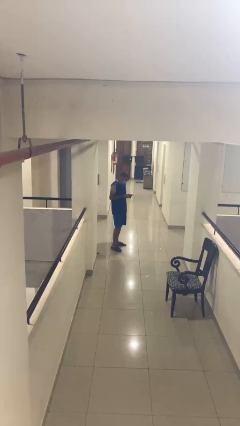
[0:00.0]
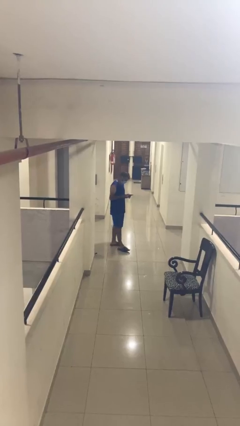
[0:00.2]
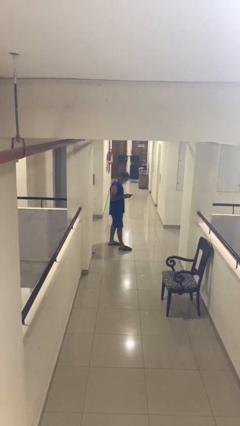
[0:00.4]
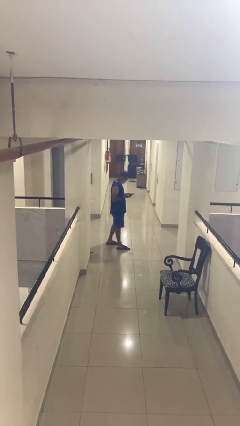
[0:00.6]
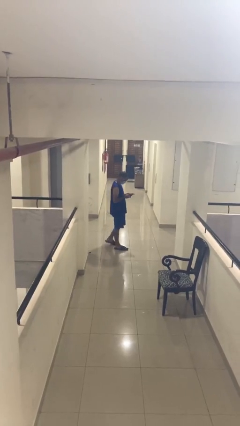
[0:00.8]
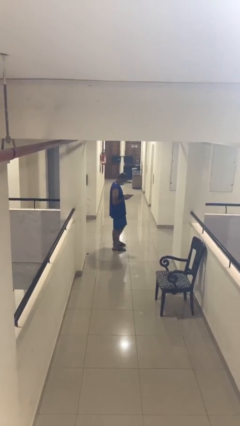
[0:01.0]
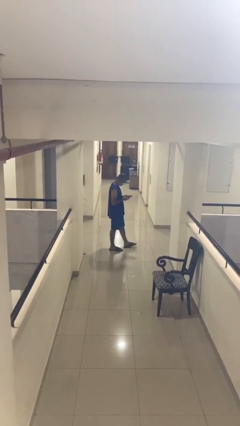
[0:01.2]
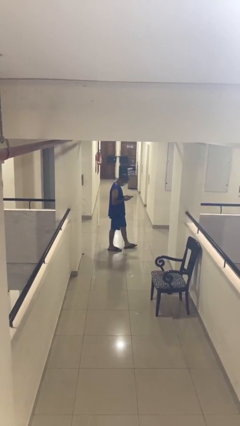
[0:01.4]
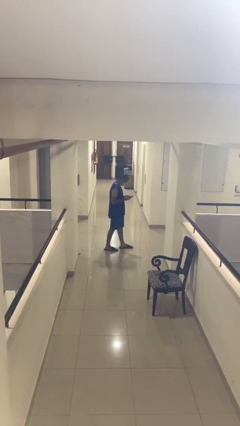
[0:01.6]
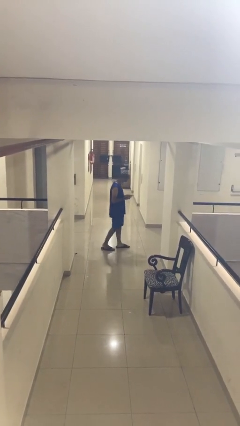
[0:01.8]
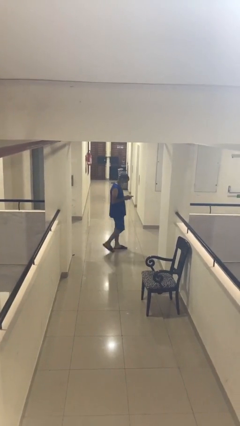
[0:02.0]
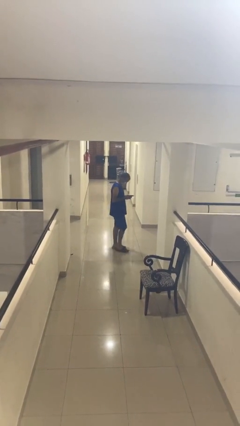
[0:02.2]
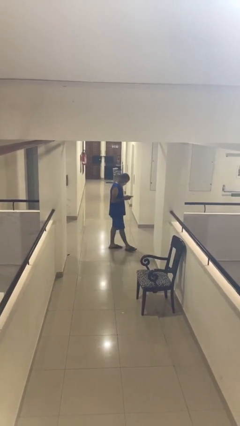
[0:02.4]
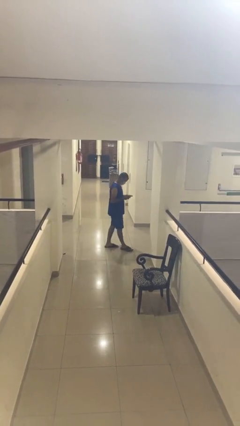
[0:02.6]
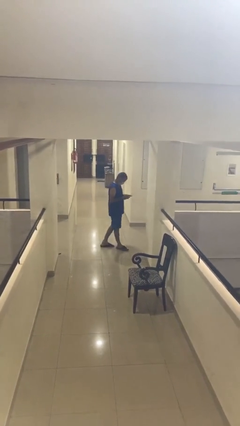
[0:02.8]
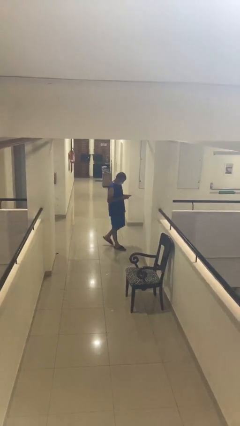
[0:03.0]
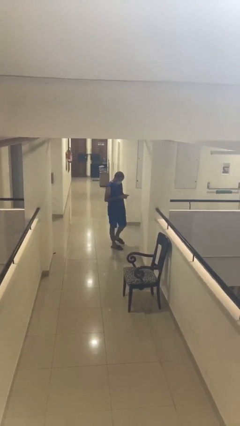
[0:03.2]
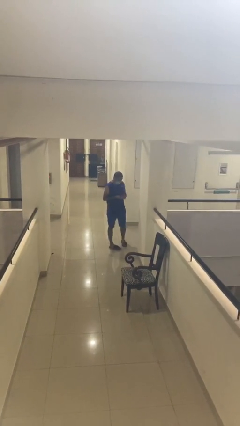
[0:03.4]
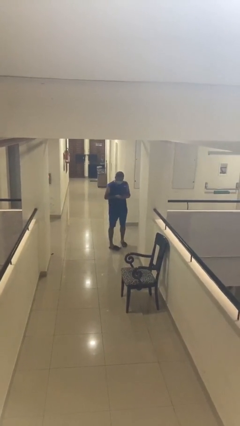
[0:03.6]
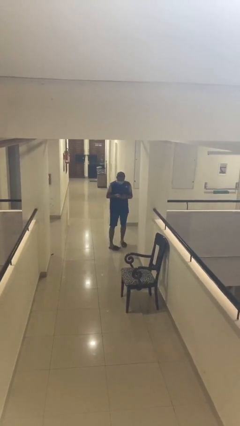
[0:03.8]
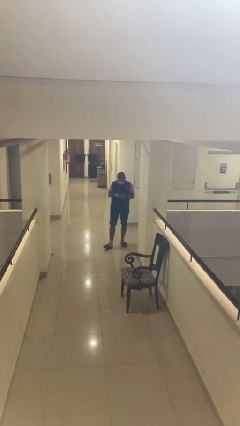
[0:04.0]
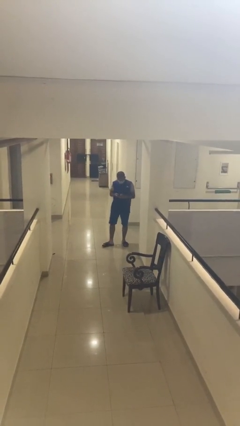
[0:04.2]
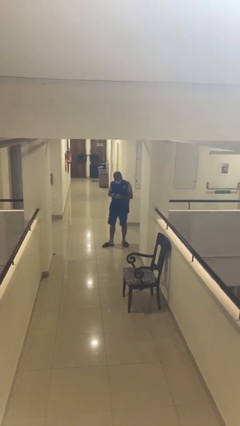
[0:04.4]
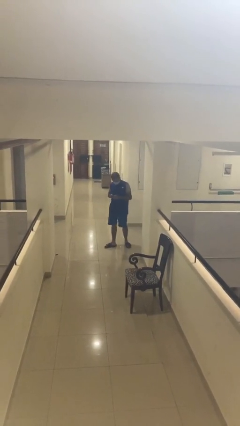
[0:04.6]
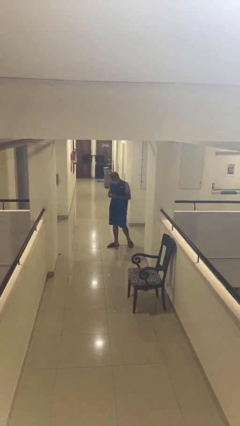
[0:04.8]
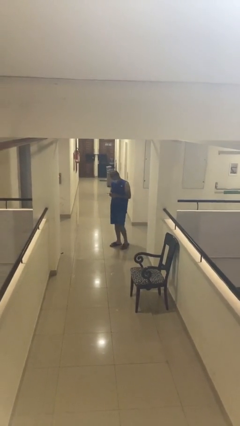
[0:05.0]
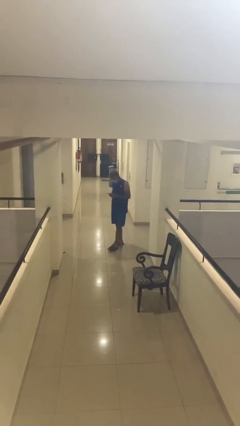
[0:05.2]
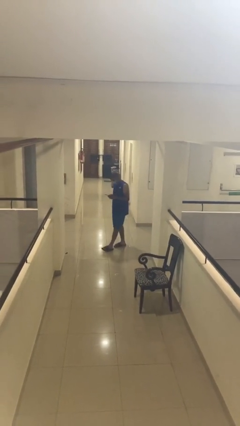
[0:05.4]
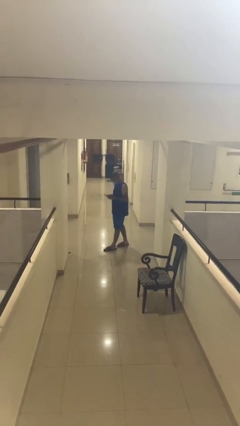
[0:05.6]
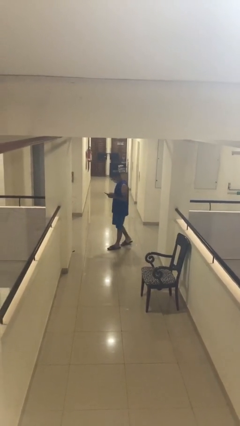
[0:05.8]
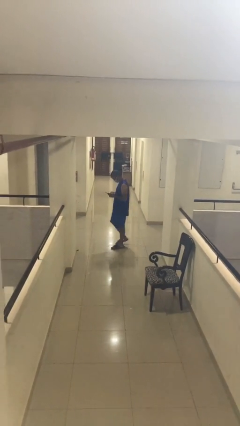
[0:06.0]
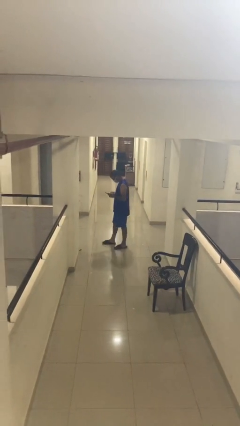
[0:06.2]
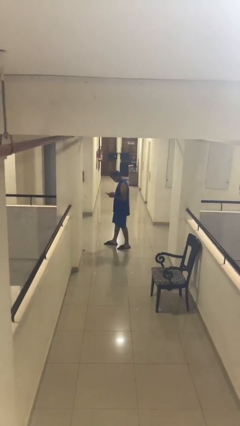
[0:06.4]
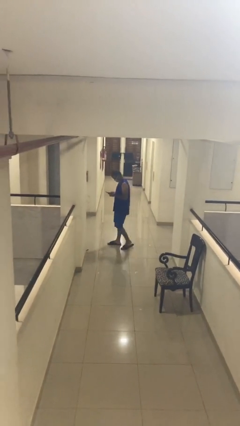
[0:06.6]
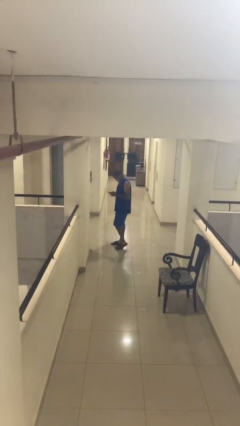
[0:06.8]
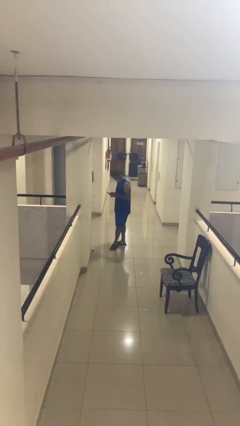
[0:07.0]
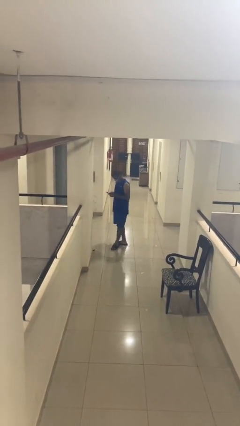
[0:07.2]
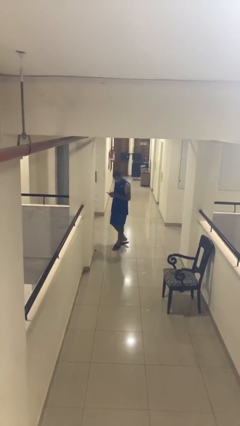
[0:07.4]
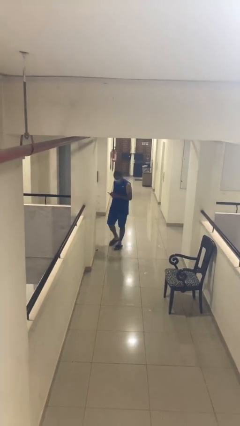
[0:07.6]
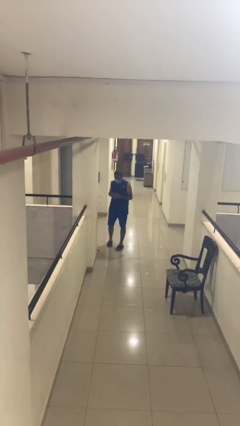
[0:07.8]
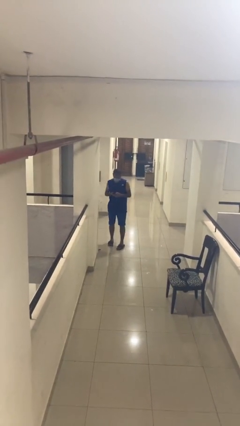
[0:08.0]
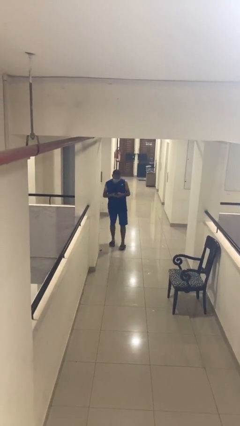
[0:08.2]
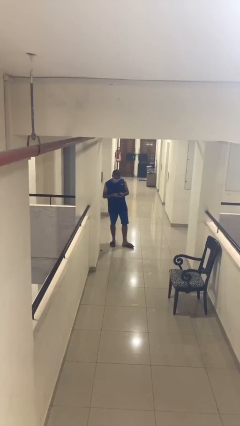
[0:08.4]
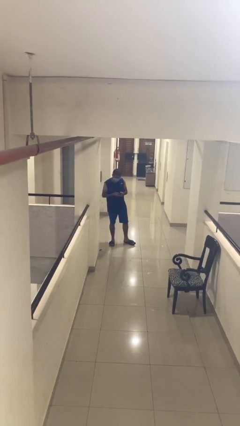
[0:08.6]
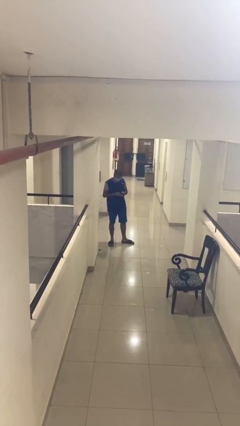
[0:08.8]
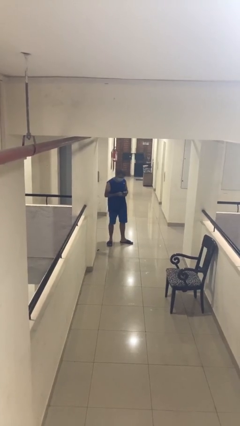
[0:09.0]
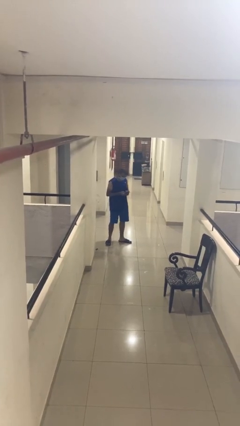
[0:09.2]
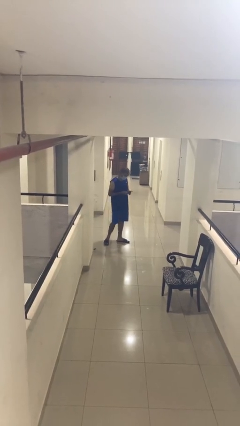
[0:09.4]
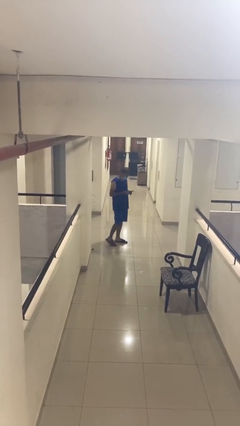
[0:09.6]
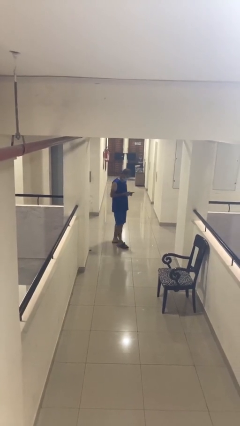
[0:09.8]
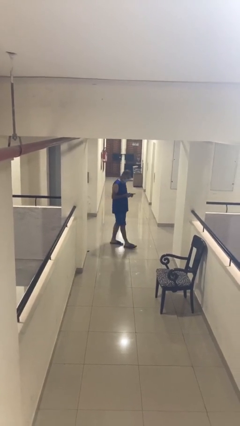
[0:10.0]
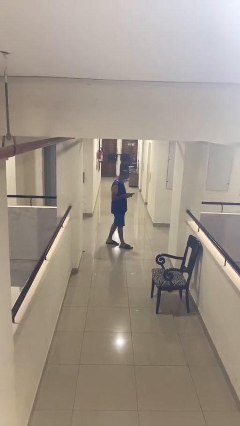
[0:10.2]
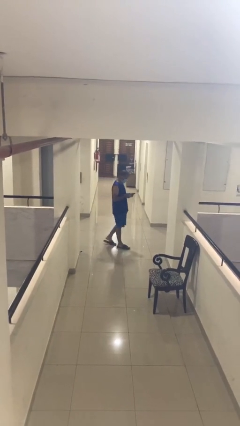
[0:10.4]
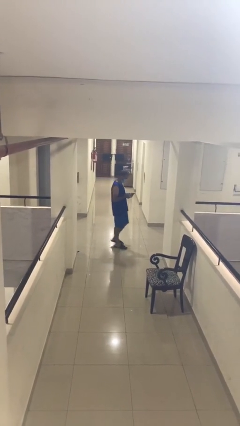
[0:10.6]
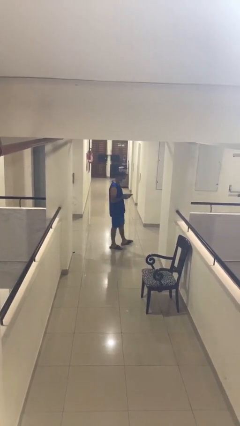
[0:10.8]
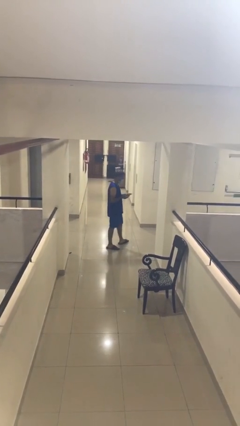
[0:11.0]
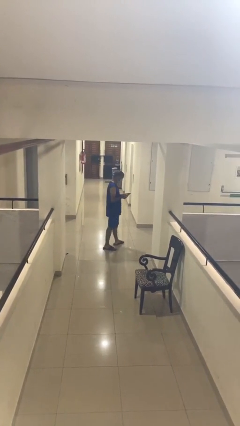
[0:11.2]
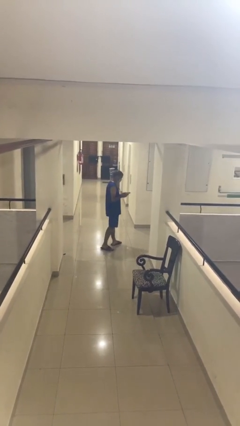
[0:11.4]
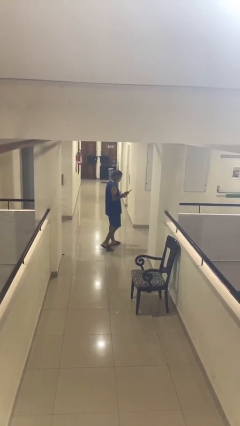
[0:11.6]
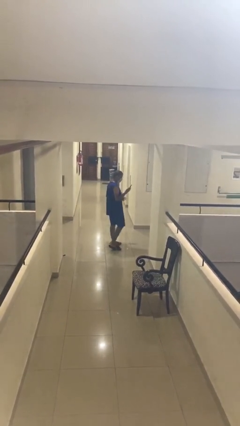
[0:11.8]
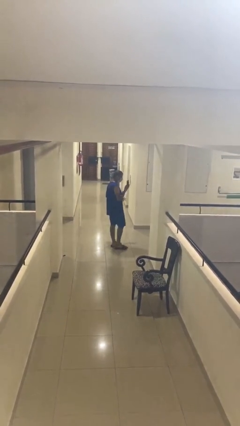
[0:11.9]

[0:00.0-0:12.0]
person texts on phone

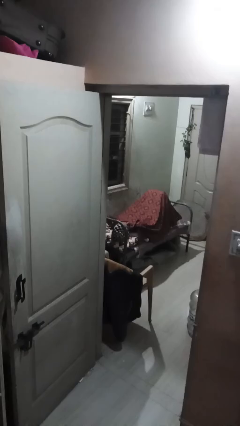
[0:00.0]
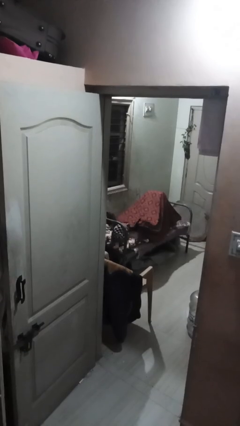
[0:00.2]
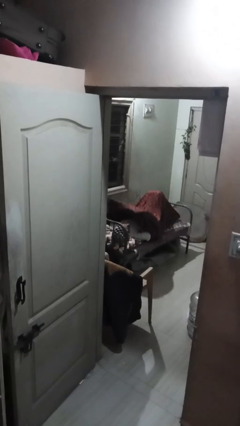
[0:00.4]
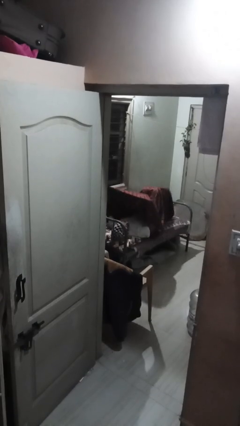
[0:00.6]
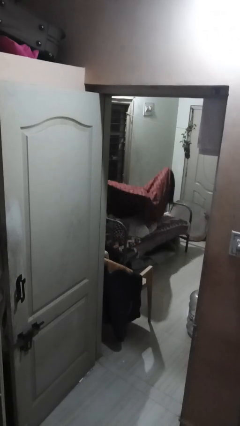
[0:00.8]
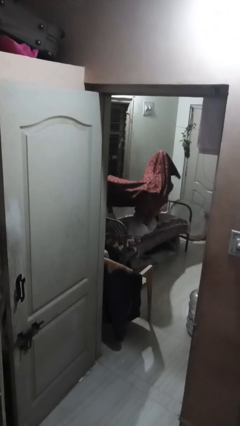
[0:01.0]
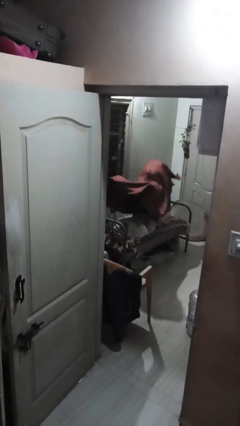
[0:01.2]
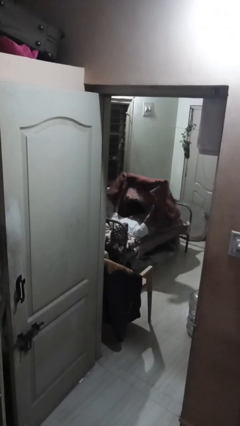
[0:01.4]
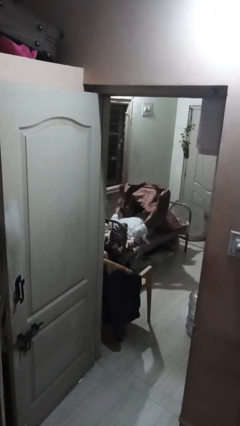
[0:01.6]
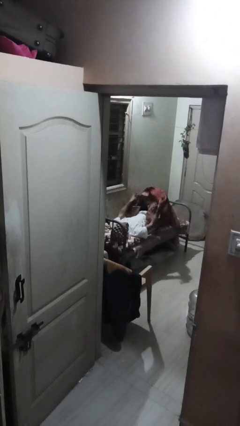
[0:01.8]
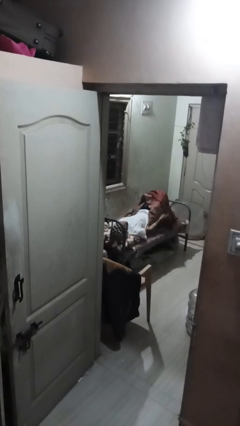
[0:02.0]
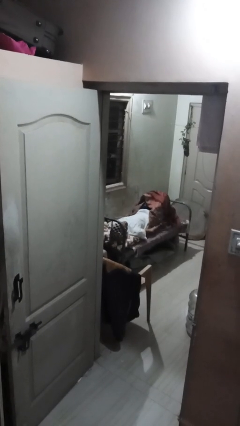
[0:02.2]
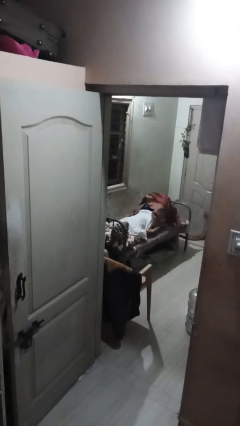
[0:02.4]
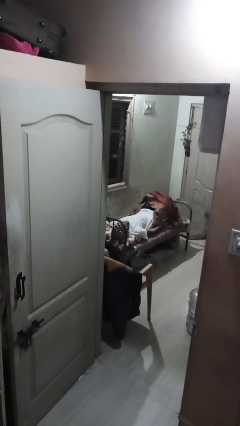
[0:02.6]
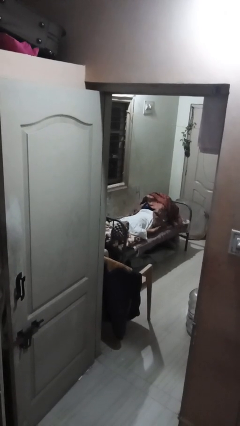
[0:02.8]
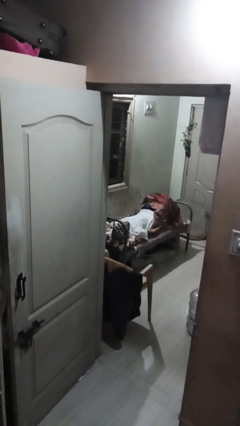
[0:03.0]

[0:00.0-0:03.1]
person uncovers with bedsheets

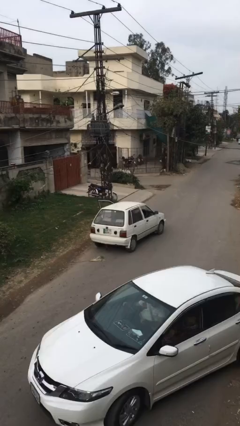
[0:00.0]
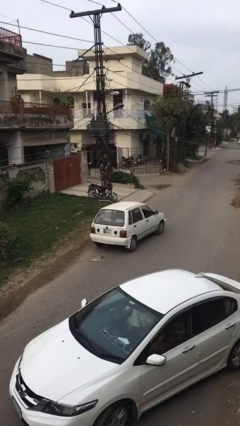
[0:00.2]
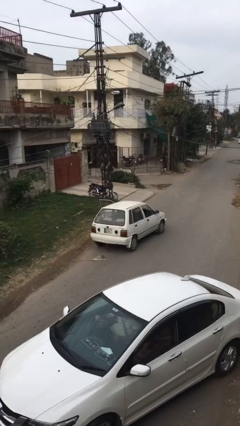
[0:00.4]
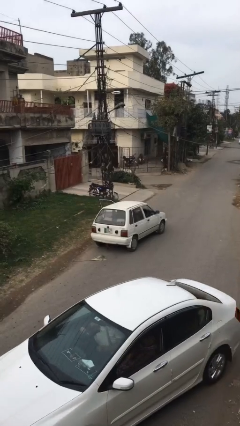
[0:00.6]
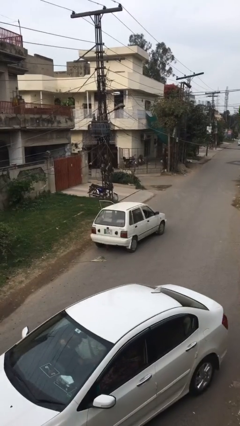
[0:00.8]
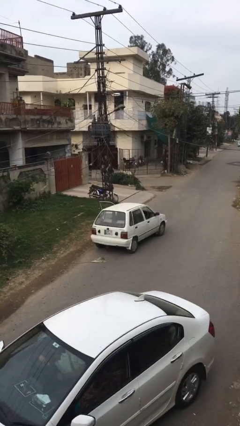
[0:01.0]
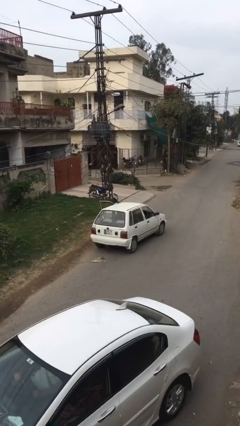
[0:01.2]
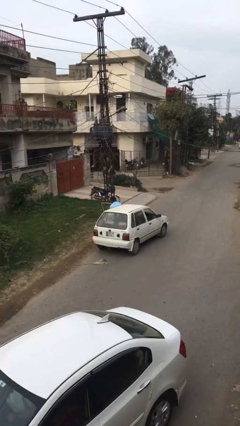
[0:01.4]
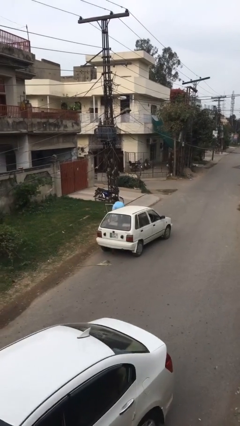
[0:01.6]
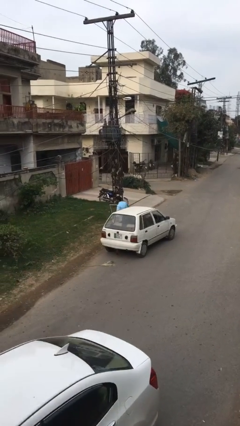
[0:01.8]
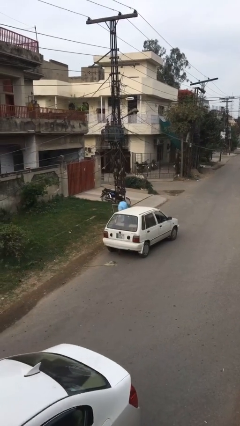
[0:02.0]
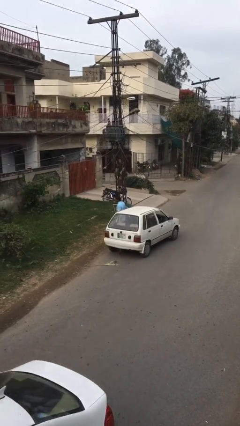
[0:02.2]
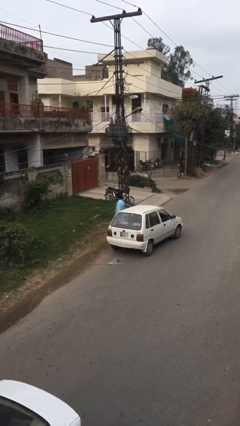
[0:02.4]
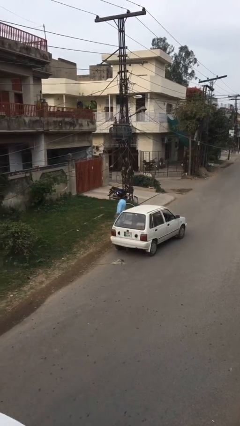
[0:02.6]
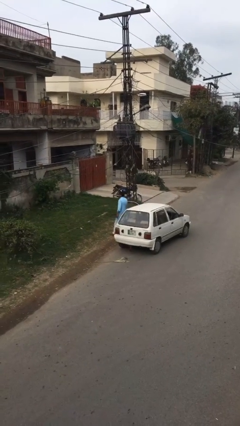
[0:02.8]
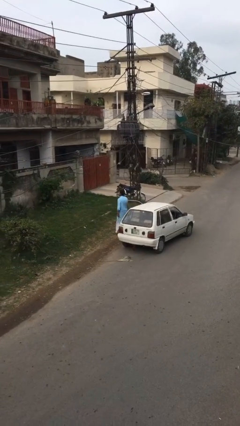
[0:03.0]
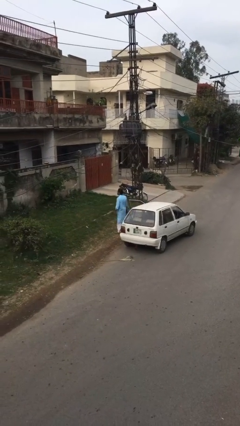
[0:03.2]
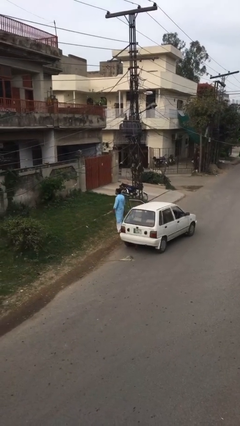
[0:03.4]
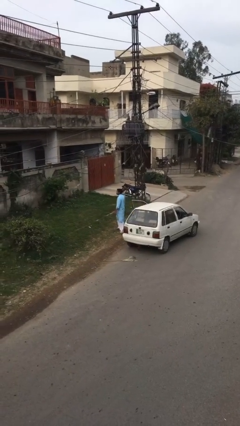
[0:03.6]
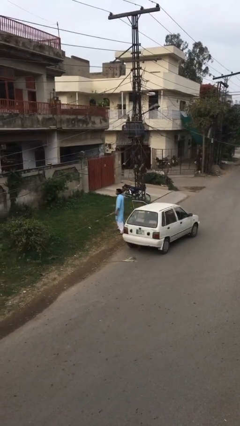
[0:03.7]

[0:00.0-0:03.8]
person exits car
